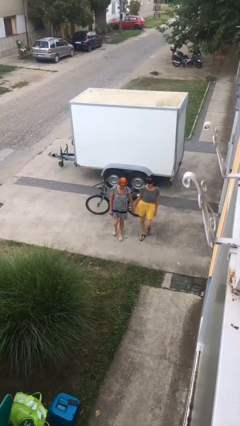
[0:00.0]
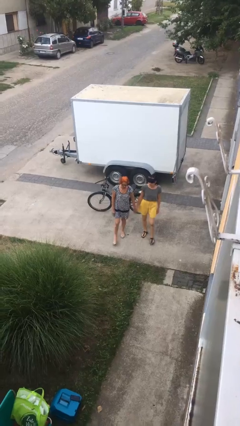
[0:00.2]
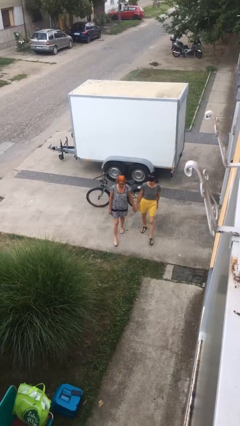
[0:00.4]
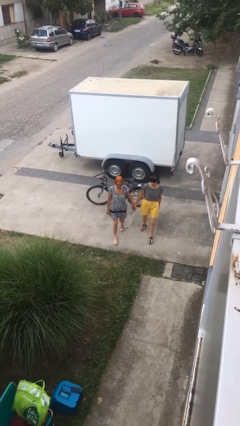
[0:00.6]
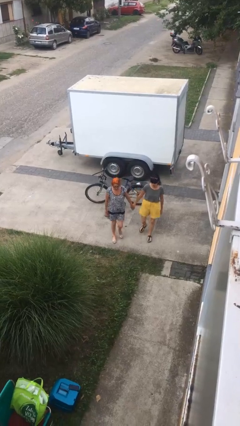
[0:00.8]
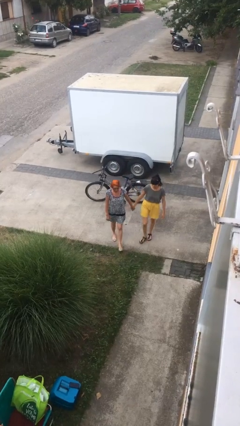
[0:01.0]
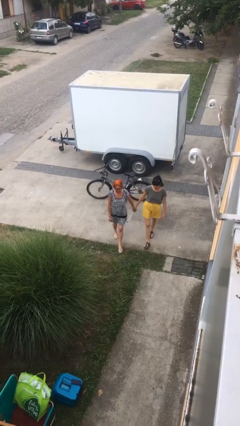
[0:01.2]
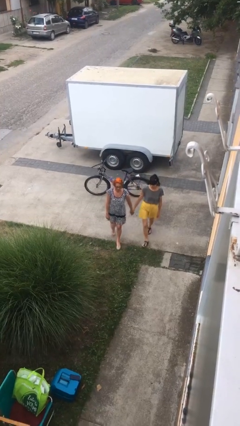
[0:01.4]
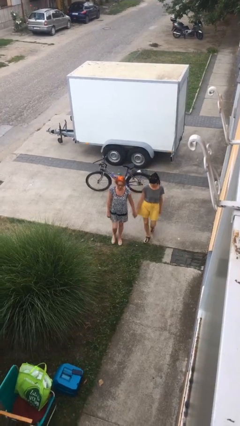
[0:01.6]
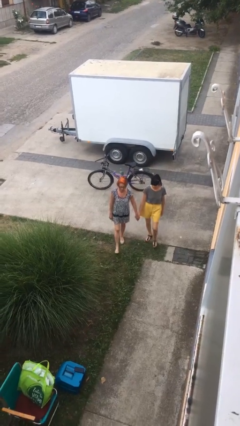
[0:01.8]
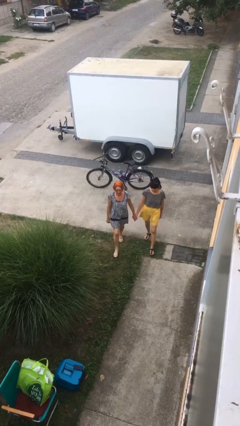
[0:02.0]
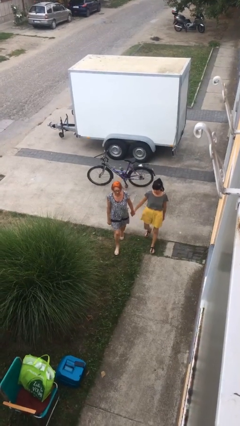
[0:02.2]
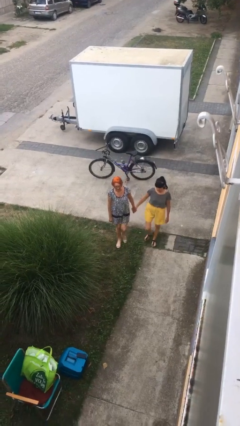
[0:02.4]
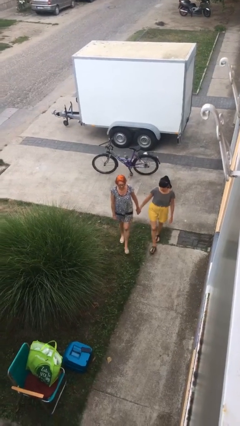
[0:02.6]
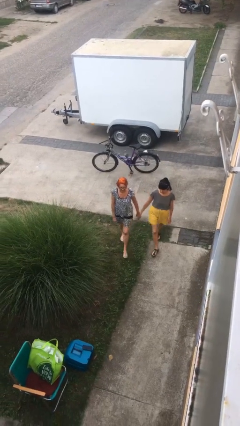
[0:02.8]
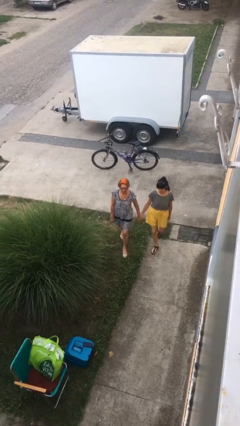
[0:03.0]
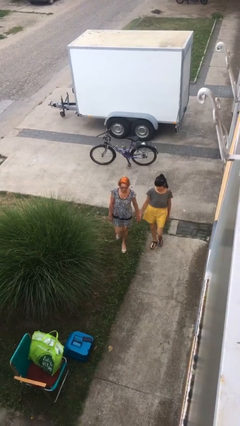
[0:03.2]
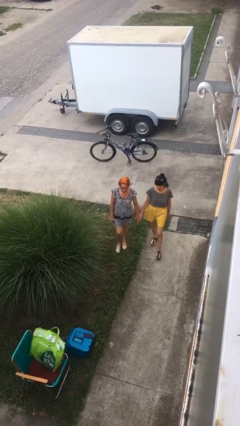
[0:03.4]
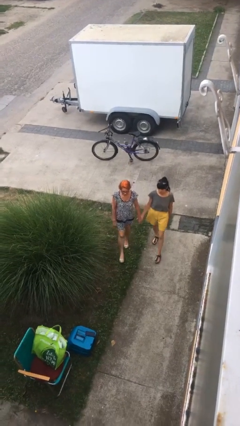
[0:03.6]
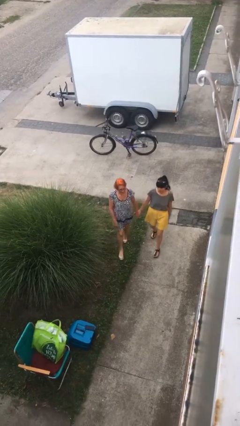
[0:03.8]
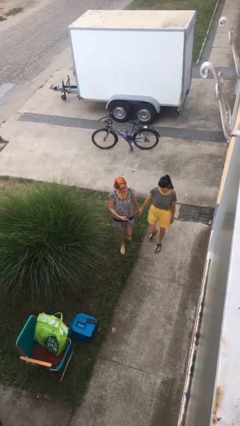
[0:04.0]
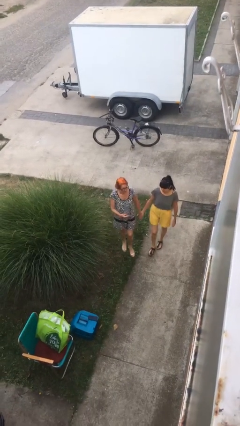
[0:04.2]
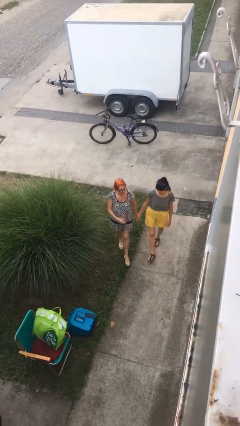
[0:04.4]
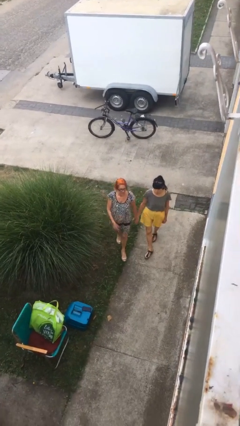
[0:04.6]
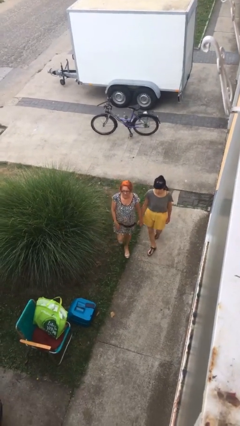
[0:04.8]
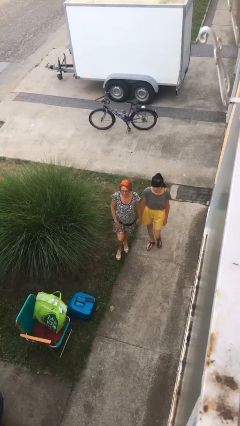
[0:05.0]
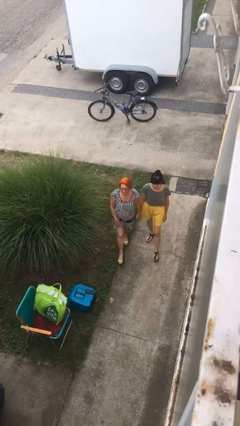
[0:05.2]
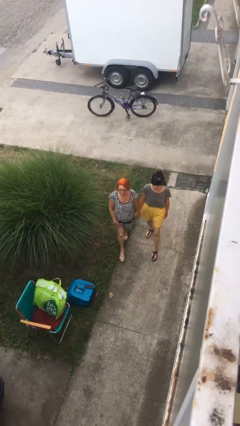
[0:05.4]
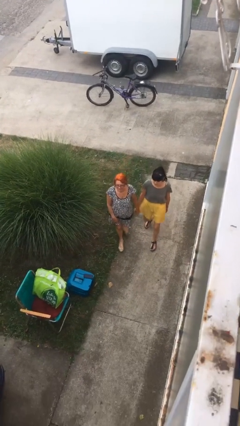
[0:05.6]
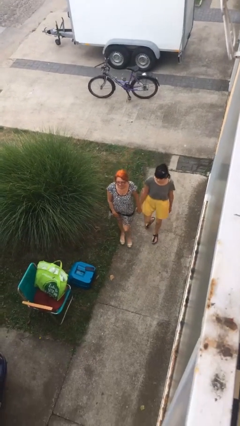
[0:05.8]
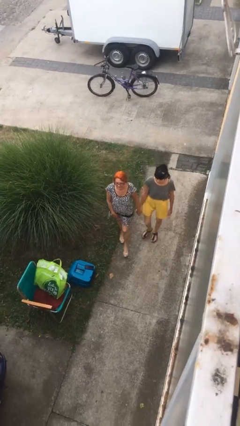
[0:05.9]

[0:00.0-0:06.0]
person holds hand

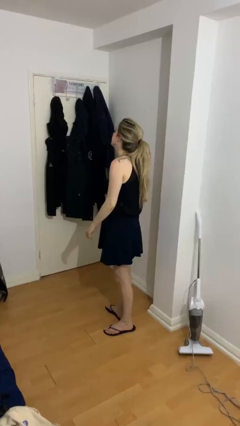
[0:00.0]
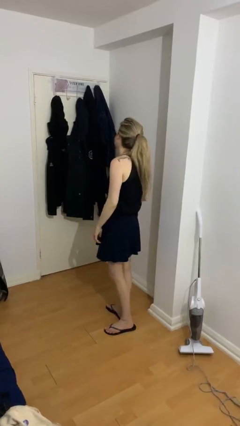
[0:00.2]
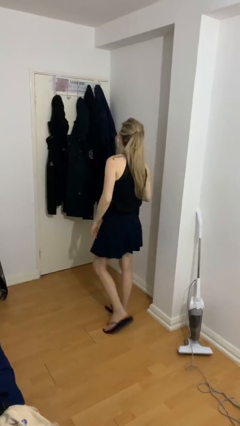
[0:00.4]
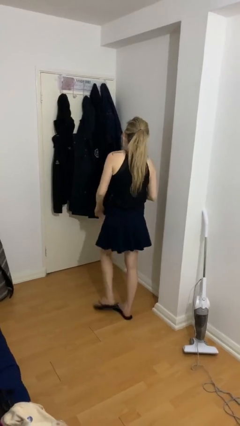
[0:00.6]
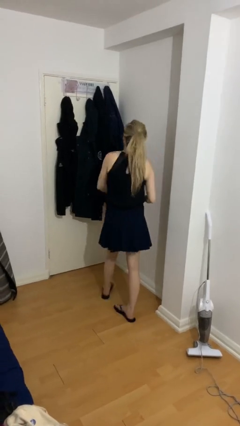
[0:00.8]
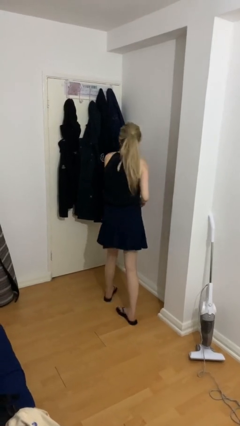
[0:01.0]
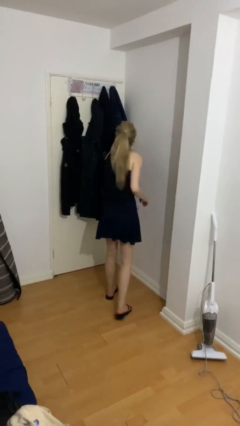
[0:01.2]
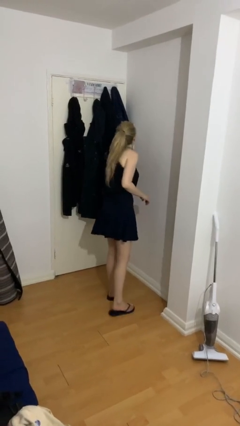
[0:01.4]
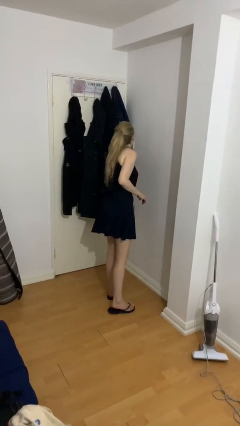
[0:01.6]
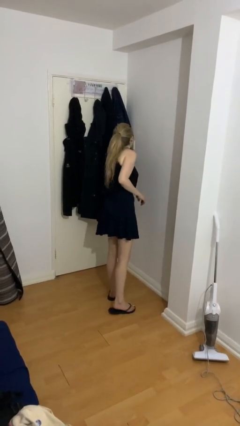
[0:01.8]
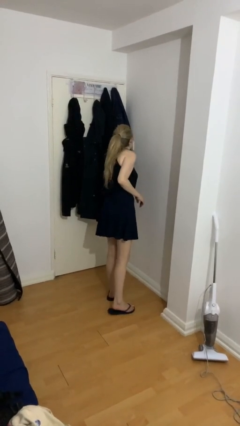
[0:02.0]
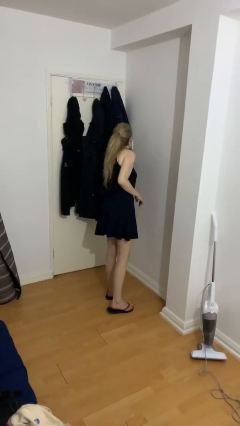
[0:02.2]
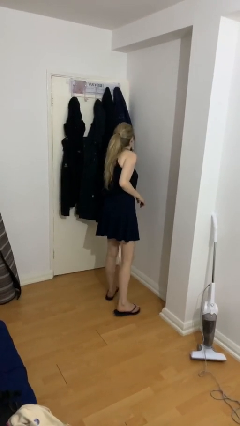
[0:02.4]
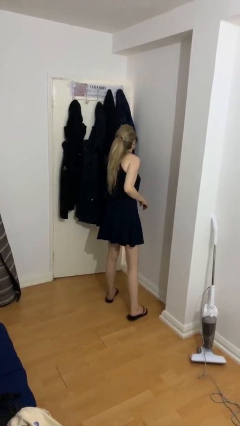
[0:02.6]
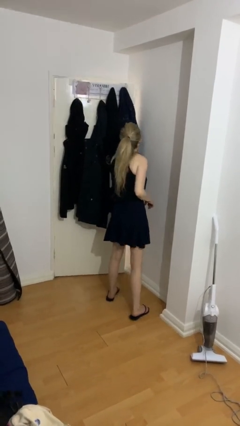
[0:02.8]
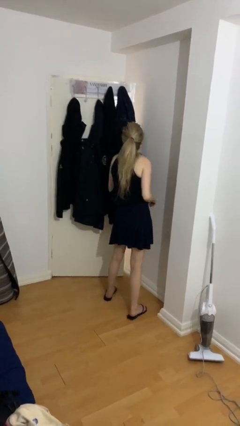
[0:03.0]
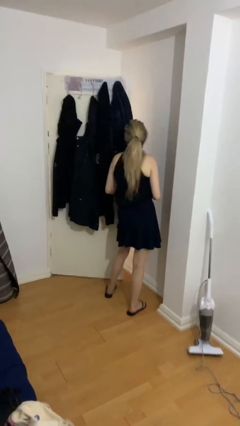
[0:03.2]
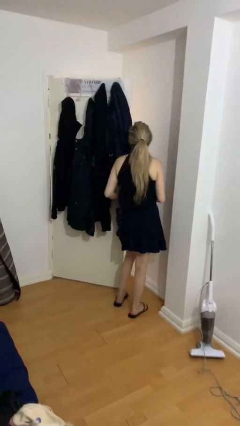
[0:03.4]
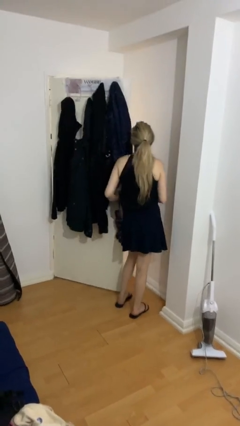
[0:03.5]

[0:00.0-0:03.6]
person opens facility door

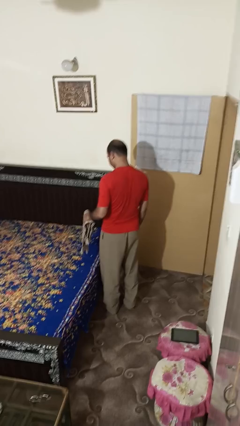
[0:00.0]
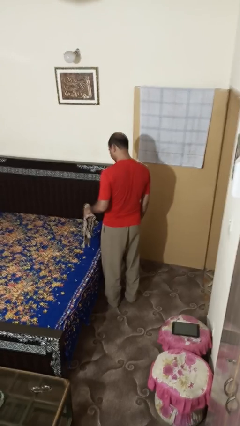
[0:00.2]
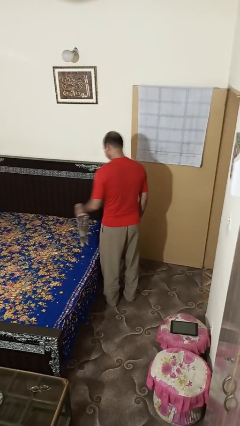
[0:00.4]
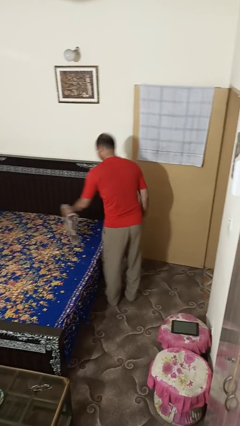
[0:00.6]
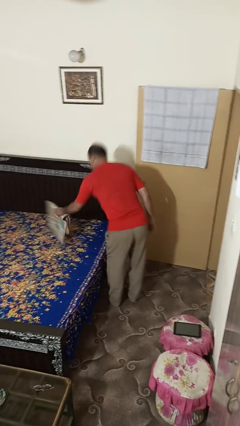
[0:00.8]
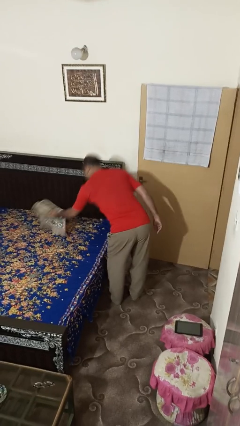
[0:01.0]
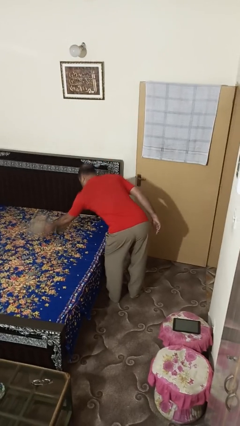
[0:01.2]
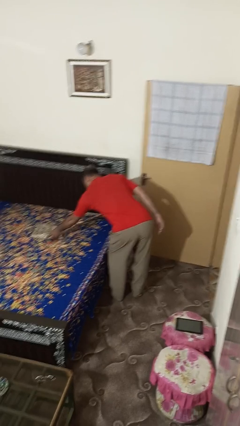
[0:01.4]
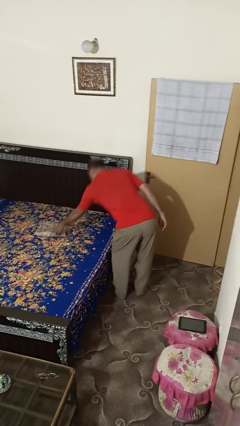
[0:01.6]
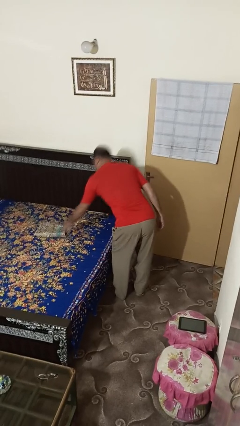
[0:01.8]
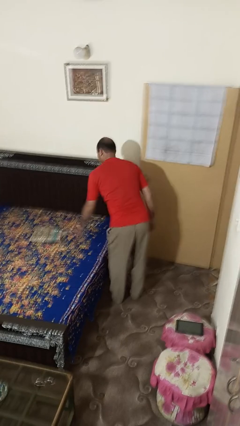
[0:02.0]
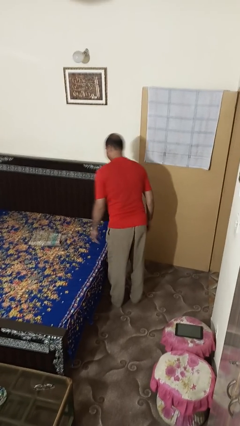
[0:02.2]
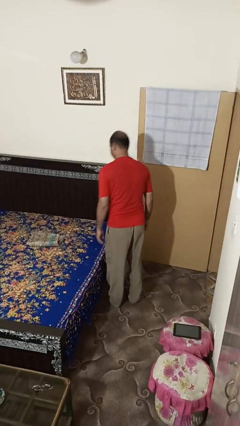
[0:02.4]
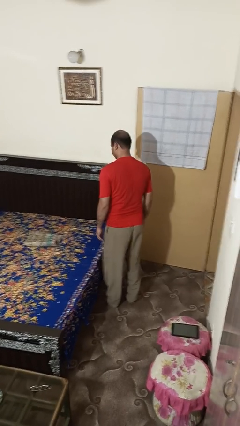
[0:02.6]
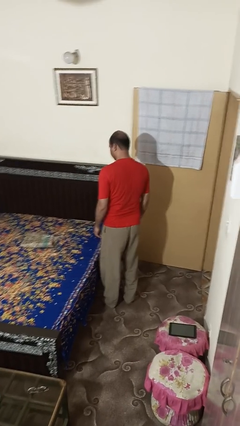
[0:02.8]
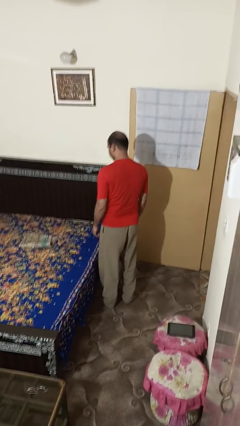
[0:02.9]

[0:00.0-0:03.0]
person puts down object on bed

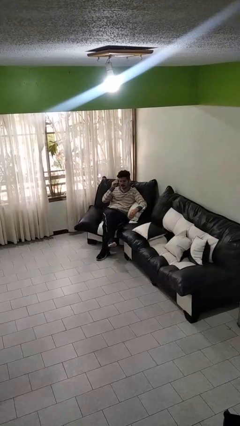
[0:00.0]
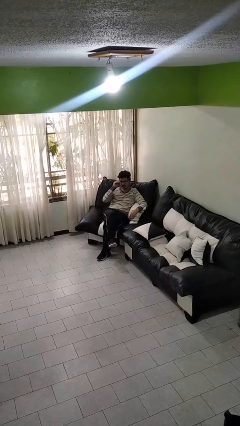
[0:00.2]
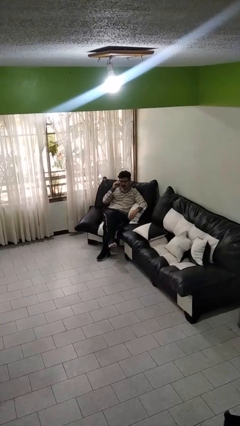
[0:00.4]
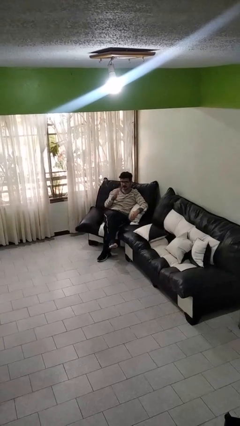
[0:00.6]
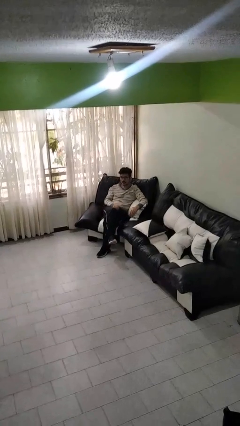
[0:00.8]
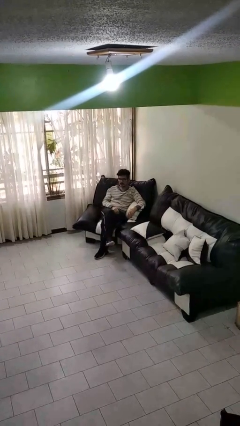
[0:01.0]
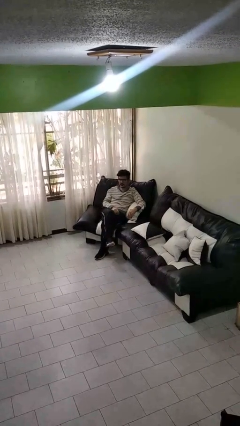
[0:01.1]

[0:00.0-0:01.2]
person puts on glasses

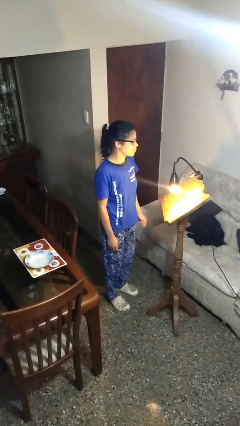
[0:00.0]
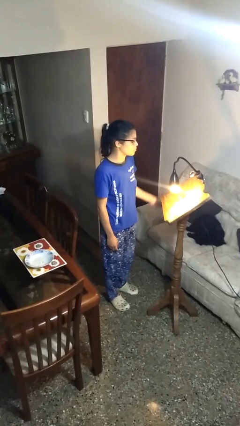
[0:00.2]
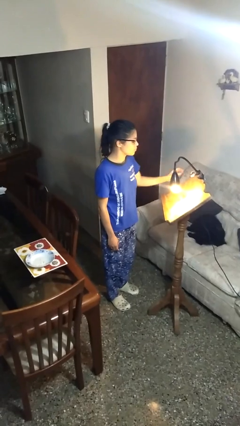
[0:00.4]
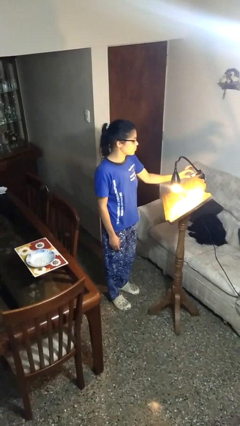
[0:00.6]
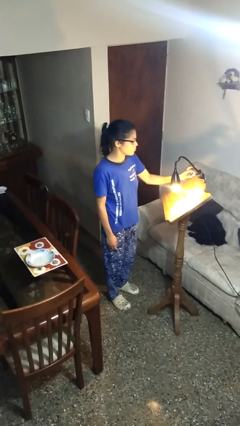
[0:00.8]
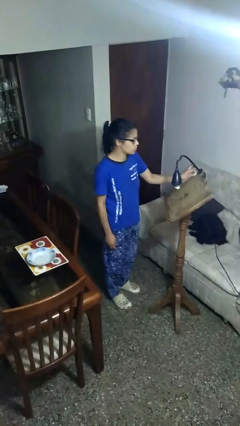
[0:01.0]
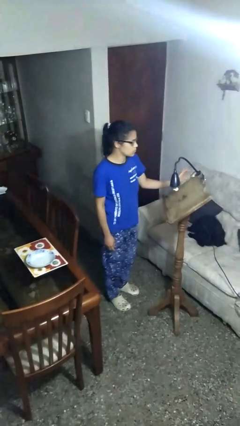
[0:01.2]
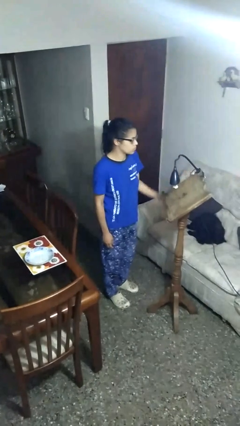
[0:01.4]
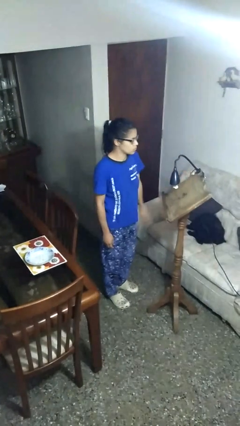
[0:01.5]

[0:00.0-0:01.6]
person turns off lamp

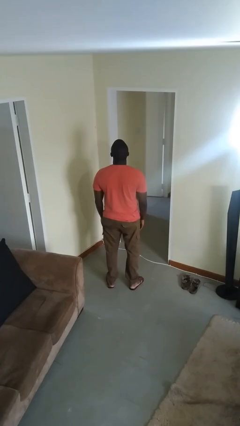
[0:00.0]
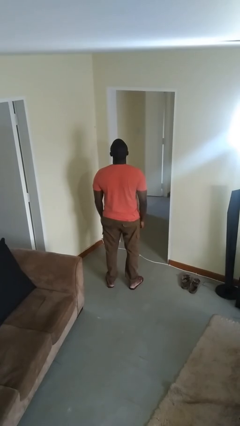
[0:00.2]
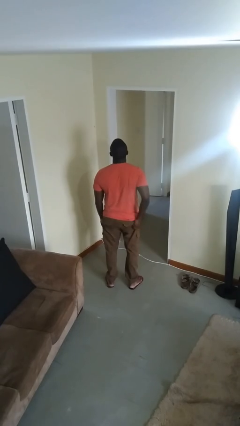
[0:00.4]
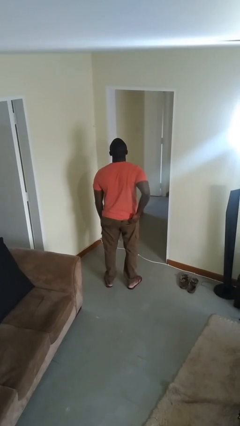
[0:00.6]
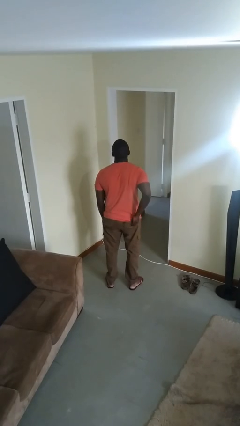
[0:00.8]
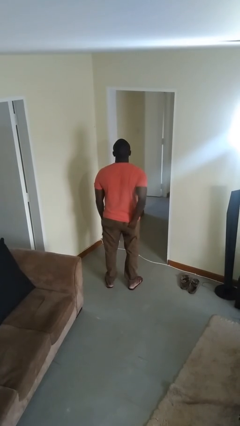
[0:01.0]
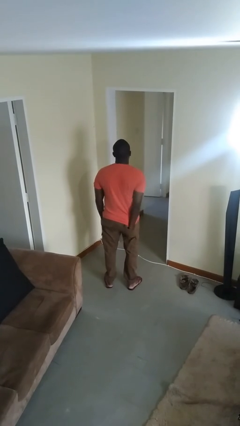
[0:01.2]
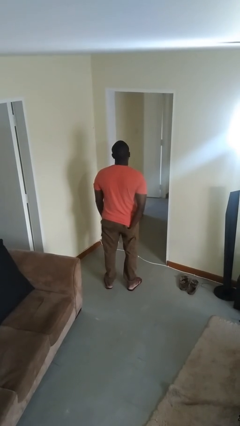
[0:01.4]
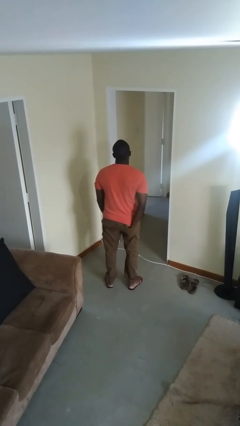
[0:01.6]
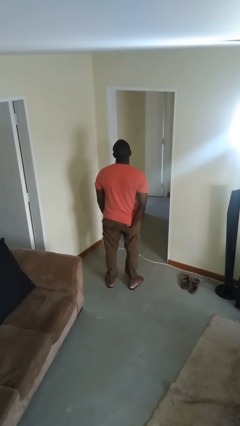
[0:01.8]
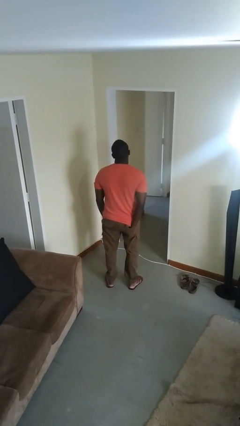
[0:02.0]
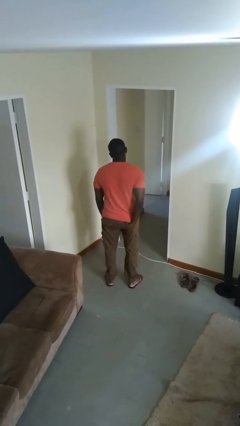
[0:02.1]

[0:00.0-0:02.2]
person puts hands in back pockets
